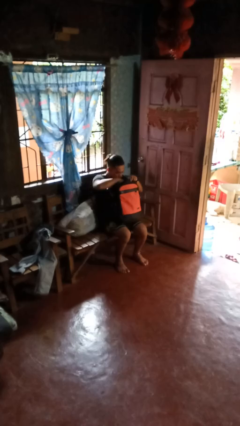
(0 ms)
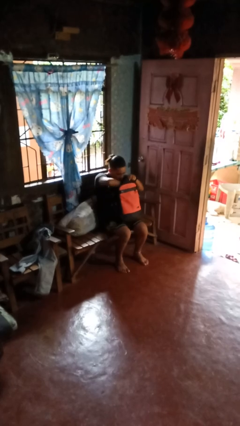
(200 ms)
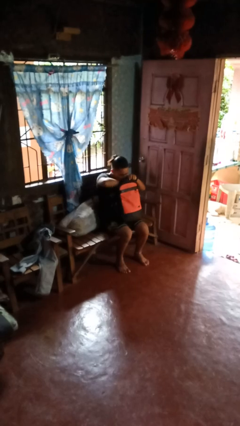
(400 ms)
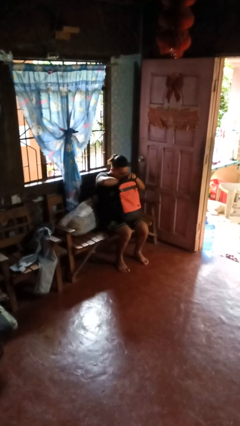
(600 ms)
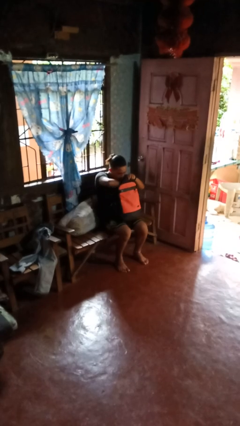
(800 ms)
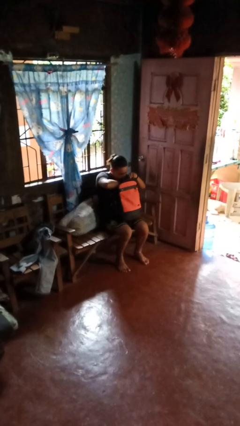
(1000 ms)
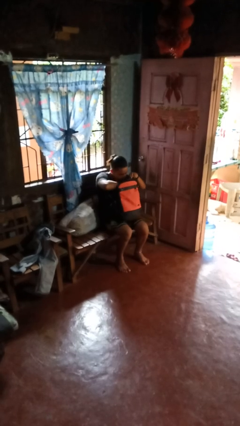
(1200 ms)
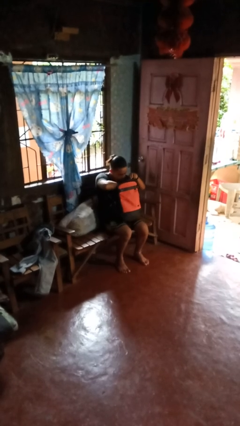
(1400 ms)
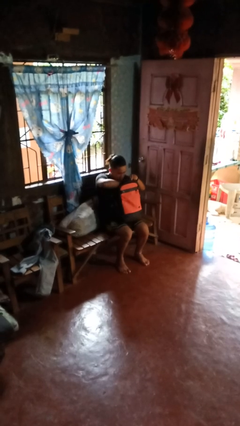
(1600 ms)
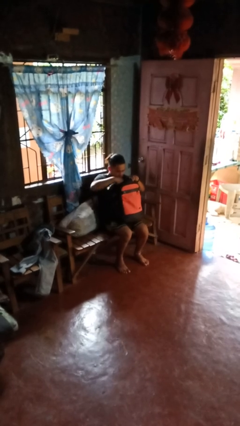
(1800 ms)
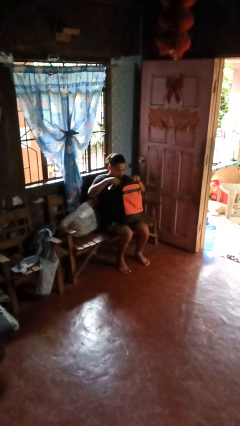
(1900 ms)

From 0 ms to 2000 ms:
person searches in bag

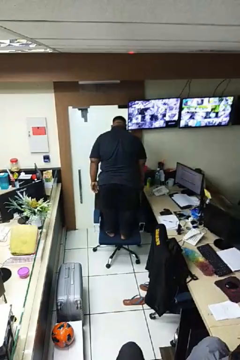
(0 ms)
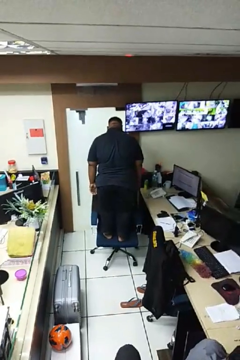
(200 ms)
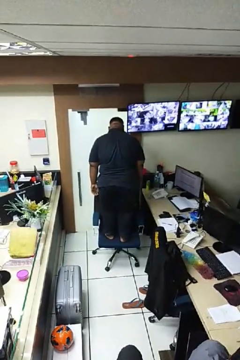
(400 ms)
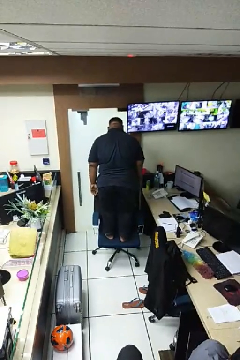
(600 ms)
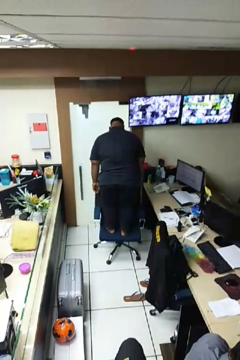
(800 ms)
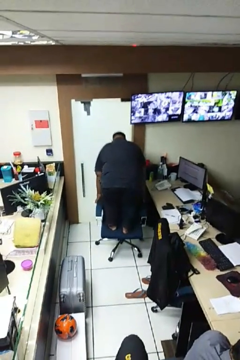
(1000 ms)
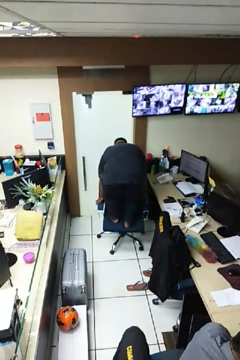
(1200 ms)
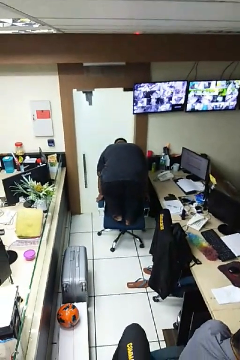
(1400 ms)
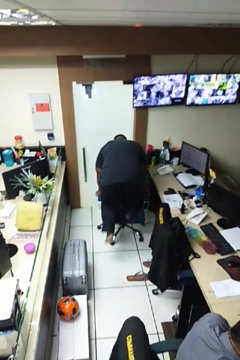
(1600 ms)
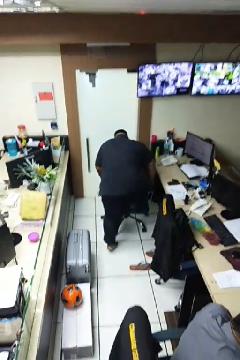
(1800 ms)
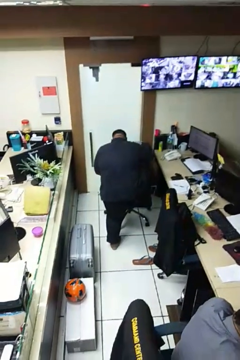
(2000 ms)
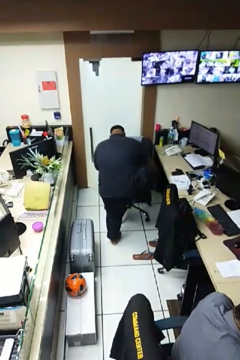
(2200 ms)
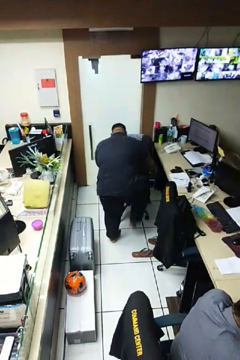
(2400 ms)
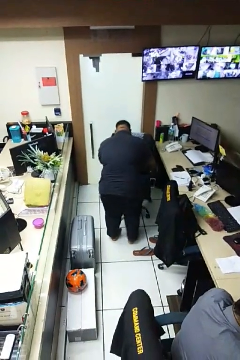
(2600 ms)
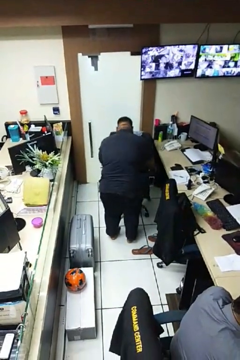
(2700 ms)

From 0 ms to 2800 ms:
person climbs off chair

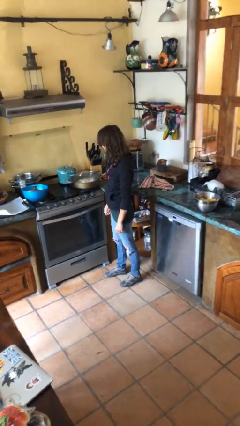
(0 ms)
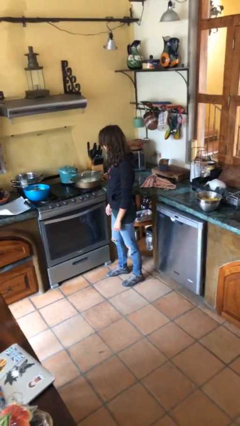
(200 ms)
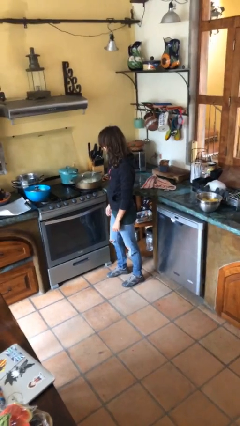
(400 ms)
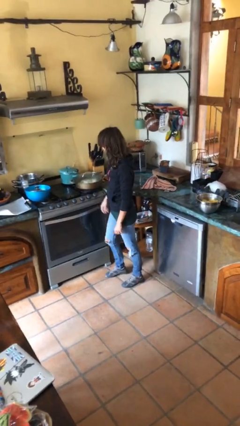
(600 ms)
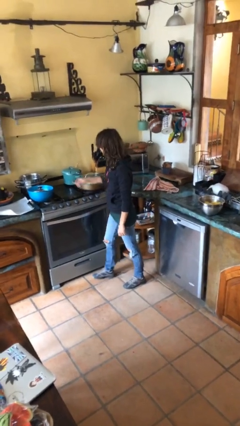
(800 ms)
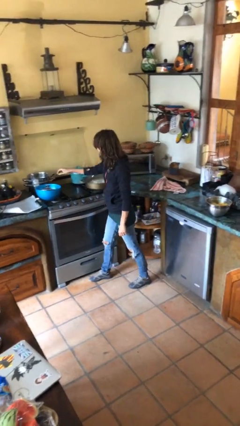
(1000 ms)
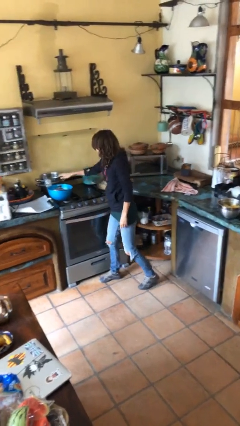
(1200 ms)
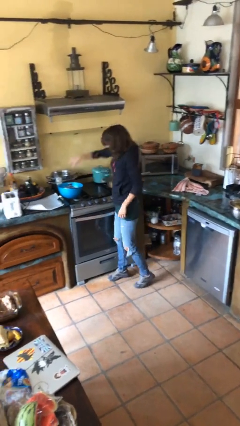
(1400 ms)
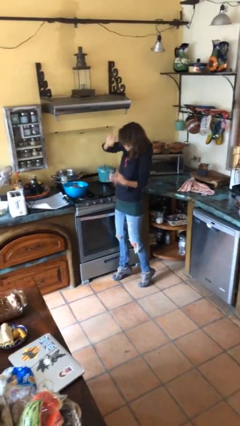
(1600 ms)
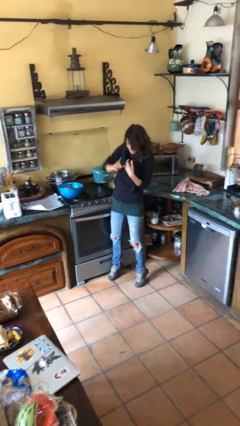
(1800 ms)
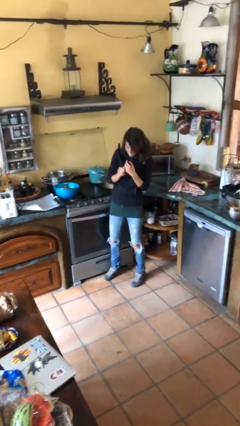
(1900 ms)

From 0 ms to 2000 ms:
person burns hand

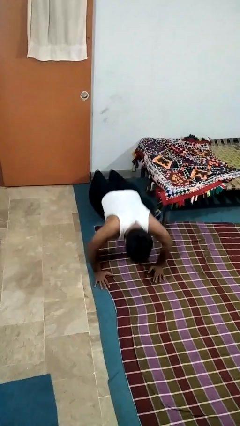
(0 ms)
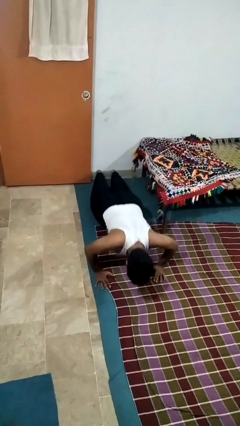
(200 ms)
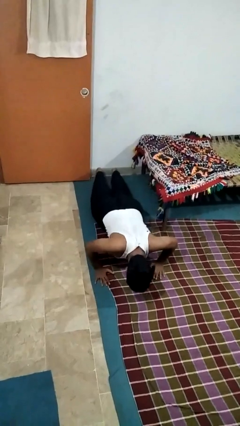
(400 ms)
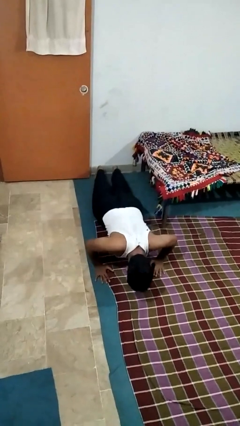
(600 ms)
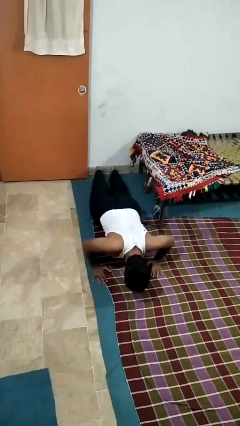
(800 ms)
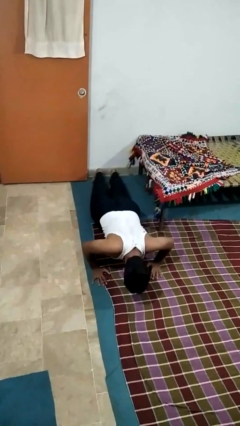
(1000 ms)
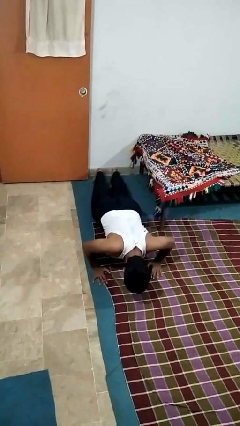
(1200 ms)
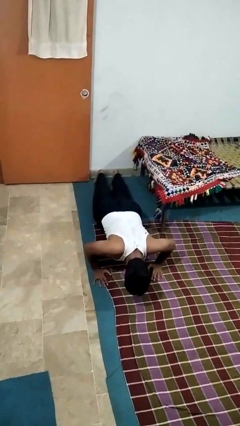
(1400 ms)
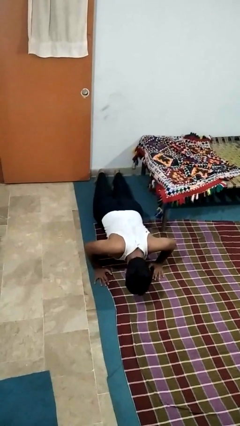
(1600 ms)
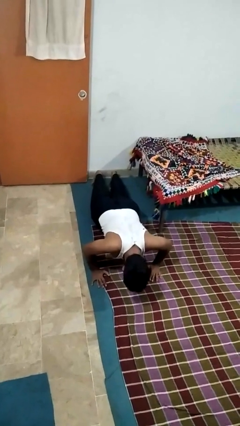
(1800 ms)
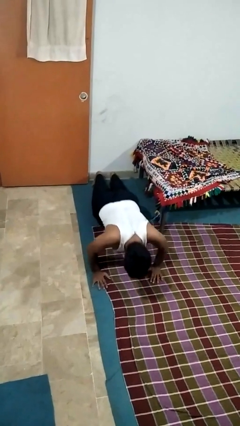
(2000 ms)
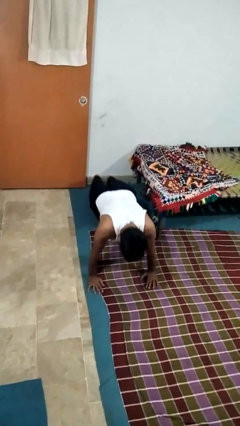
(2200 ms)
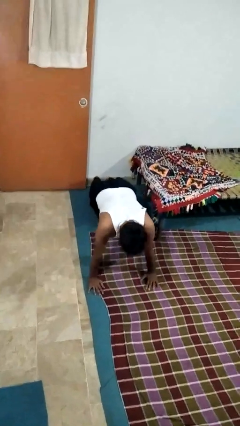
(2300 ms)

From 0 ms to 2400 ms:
person exercises with pushup

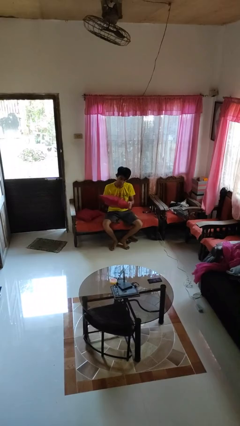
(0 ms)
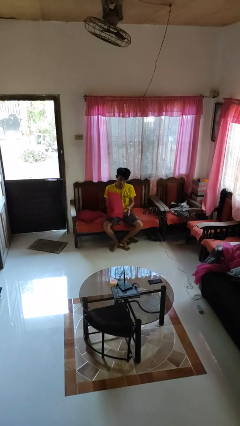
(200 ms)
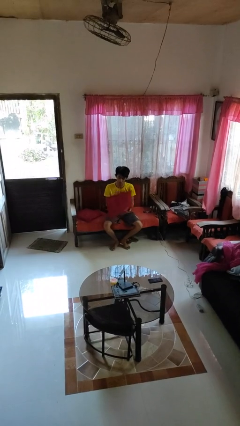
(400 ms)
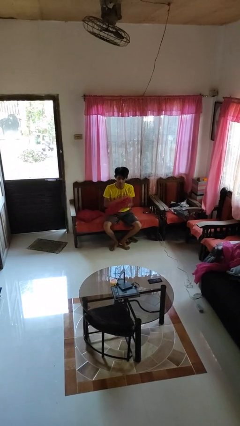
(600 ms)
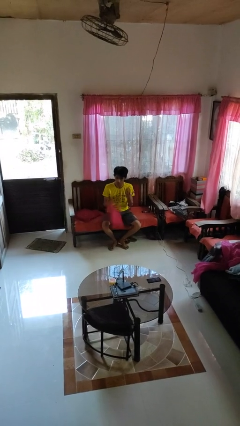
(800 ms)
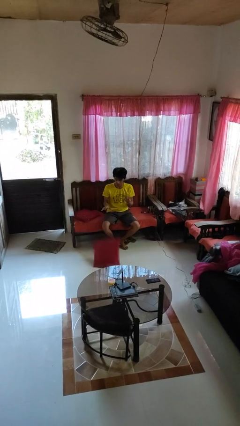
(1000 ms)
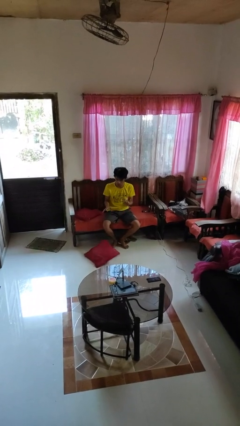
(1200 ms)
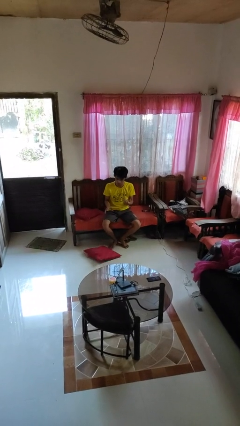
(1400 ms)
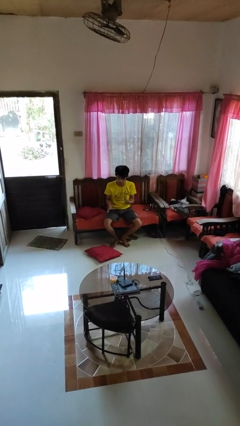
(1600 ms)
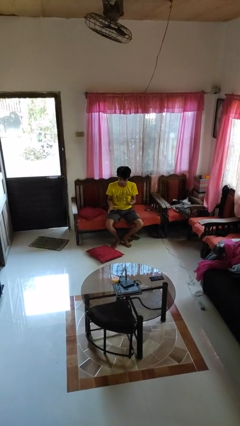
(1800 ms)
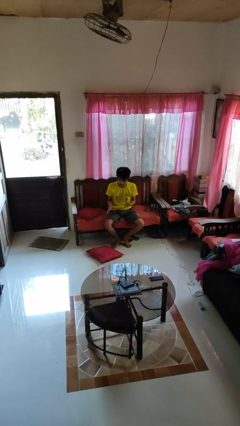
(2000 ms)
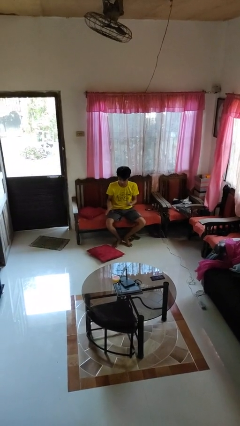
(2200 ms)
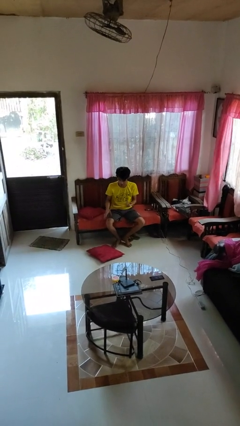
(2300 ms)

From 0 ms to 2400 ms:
person drops object

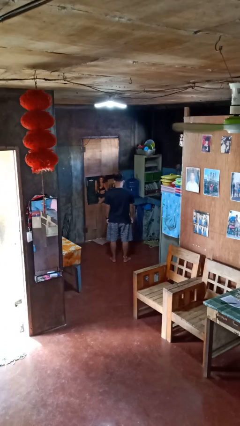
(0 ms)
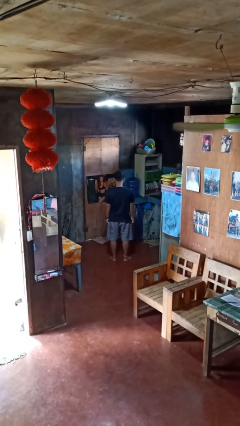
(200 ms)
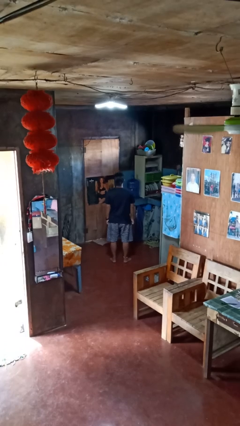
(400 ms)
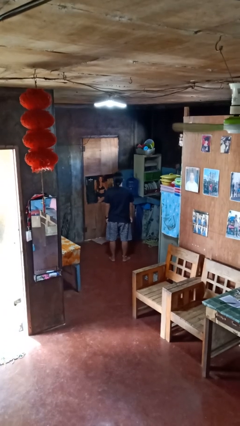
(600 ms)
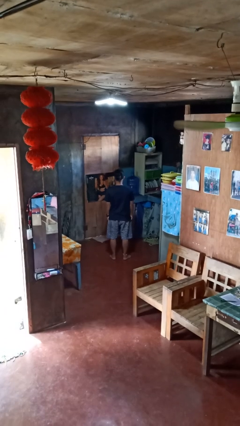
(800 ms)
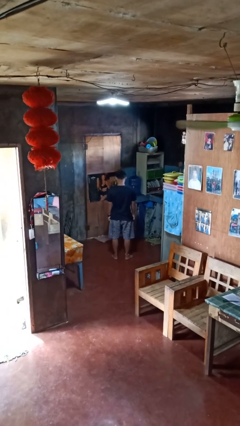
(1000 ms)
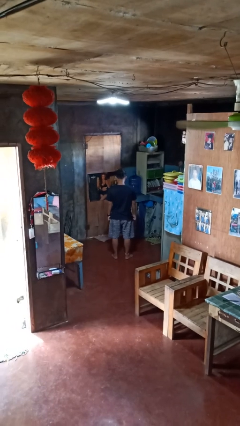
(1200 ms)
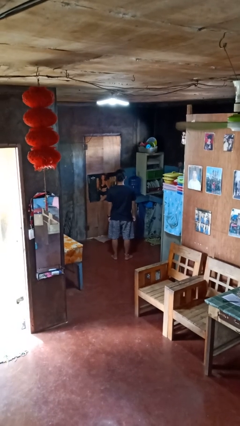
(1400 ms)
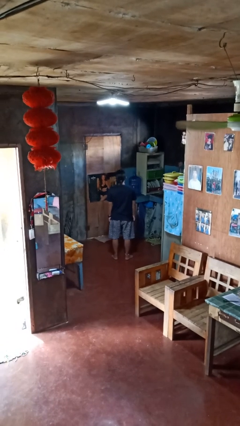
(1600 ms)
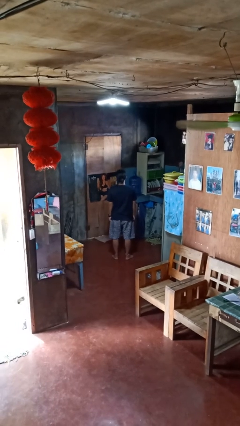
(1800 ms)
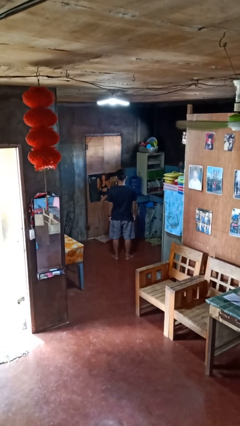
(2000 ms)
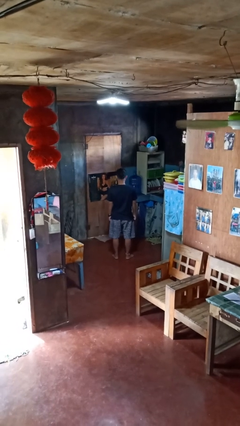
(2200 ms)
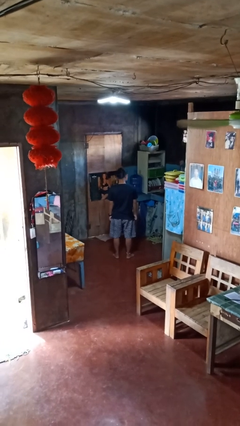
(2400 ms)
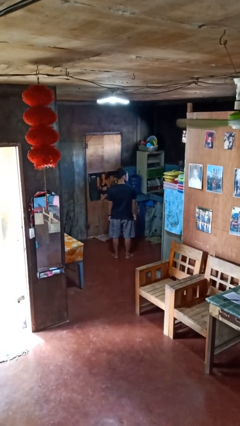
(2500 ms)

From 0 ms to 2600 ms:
person nods head

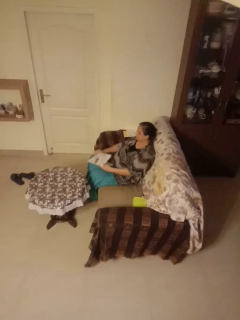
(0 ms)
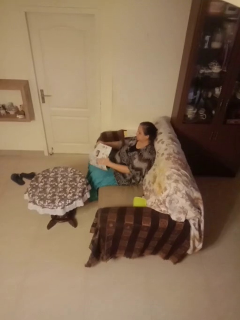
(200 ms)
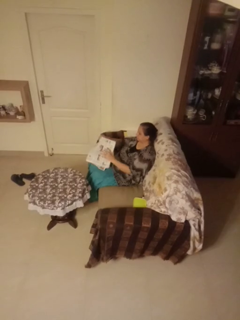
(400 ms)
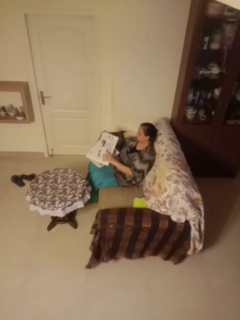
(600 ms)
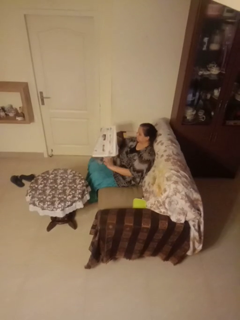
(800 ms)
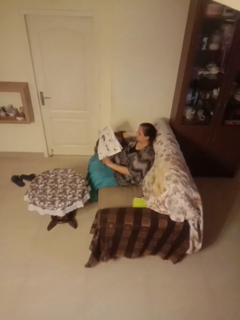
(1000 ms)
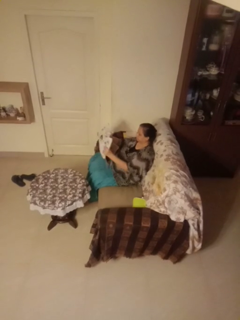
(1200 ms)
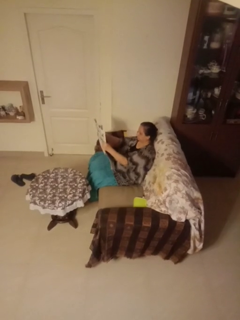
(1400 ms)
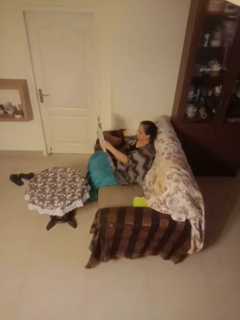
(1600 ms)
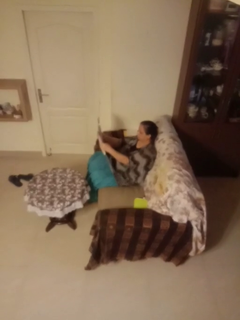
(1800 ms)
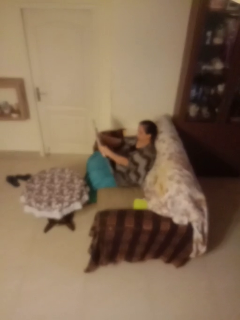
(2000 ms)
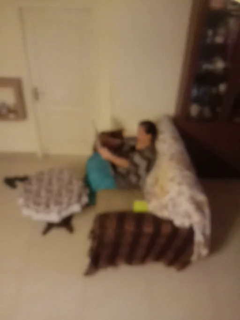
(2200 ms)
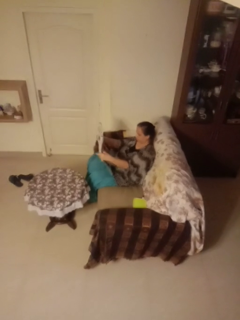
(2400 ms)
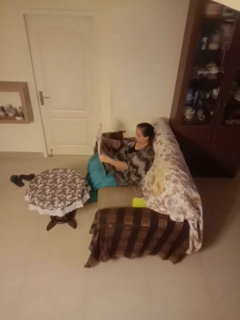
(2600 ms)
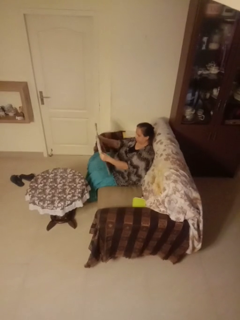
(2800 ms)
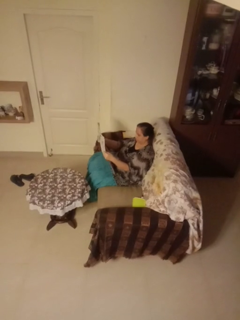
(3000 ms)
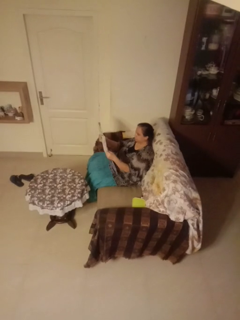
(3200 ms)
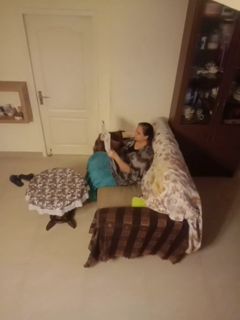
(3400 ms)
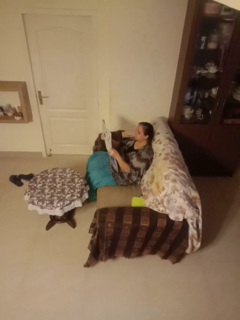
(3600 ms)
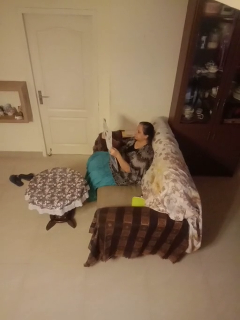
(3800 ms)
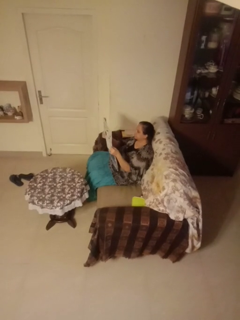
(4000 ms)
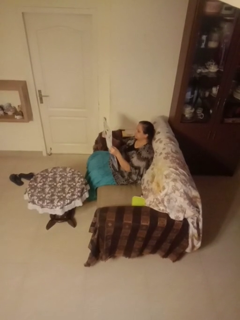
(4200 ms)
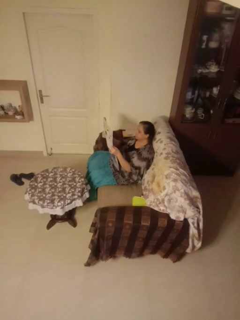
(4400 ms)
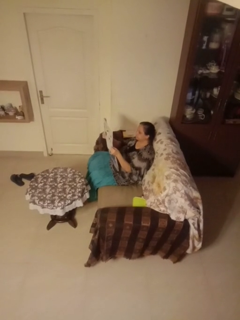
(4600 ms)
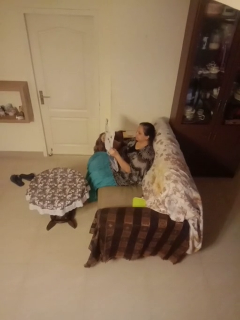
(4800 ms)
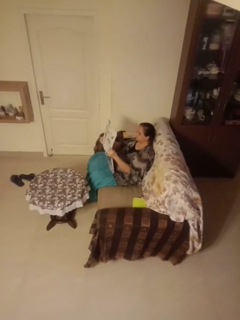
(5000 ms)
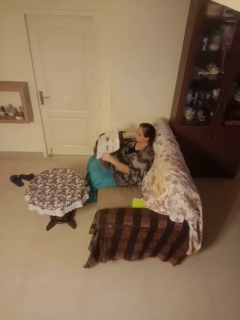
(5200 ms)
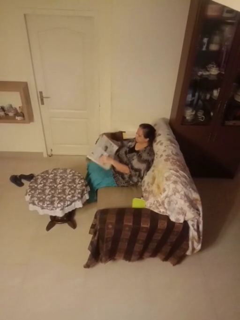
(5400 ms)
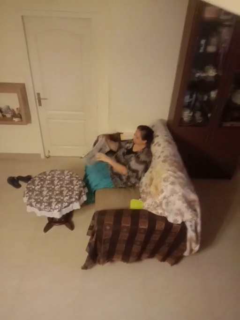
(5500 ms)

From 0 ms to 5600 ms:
person reads newspaper
